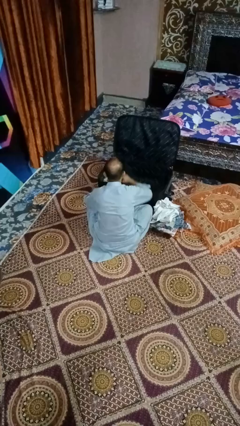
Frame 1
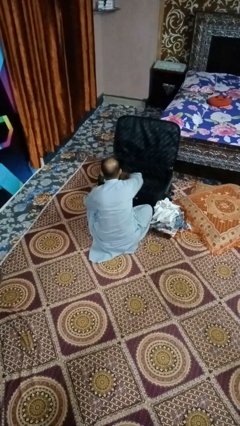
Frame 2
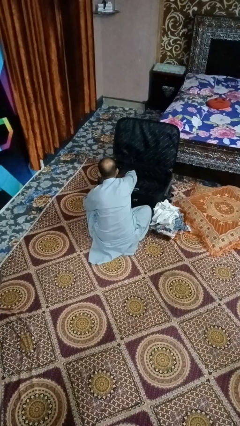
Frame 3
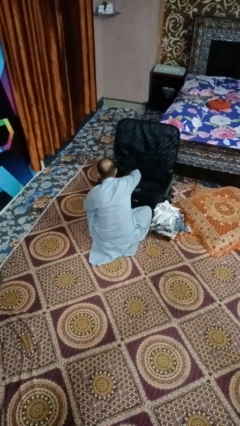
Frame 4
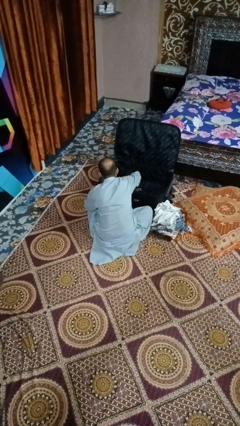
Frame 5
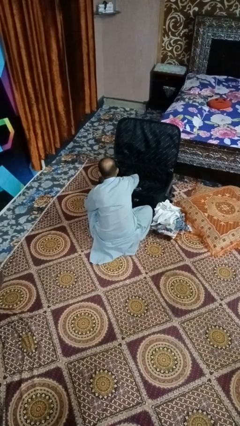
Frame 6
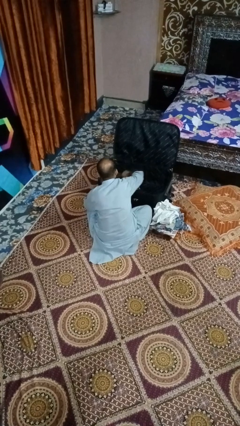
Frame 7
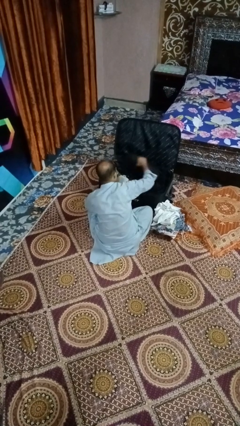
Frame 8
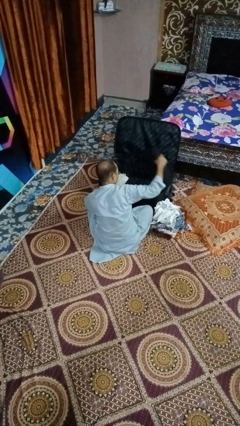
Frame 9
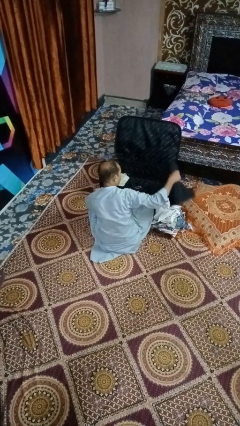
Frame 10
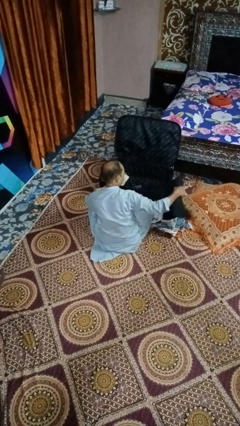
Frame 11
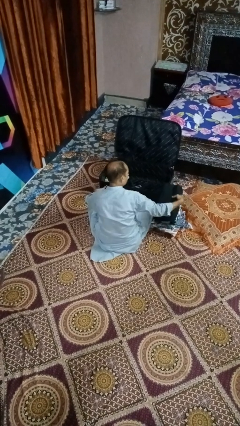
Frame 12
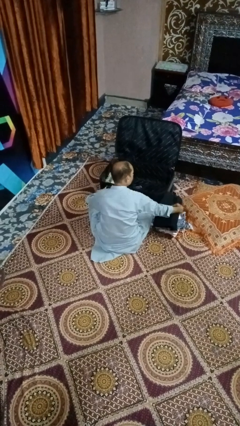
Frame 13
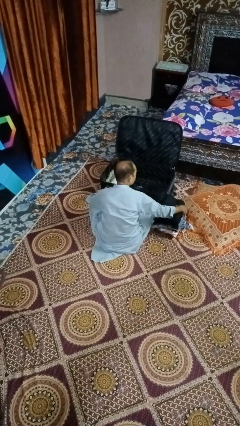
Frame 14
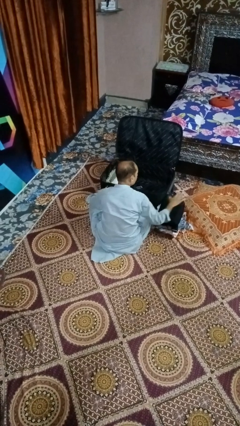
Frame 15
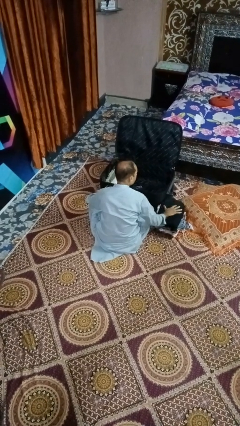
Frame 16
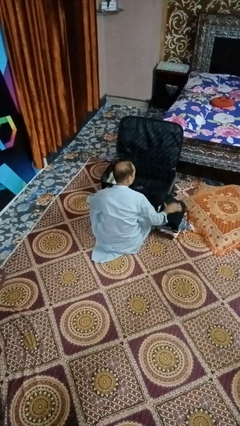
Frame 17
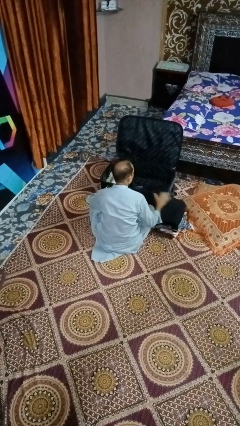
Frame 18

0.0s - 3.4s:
person unloads clothes from suitcase

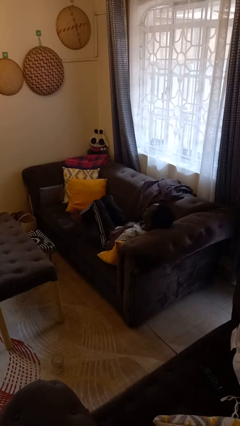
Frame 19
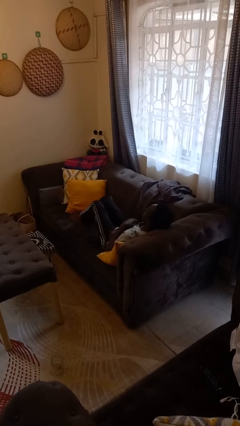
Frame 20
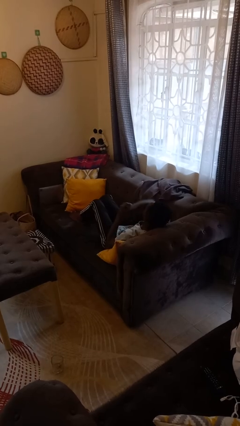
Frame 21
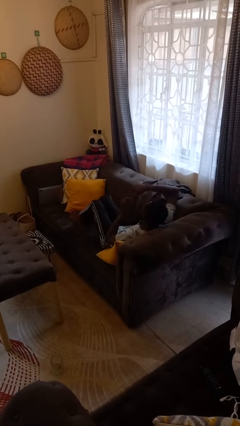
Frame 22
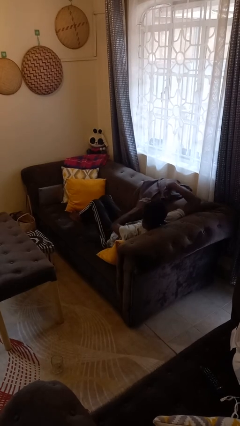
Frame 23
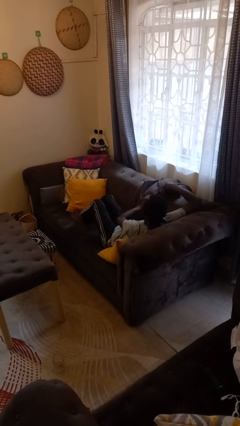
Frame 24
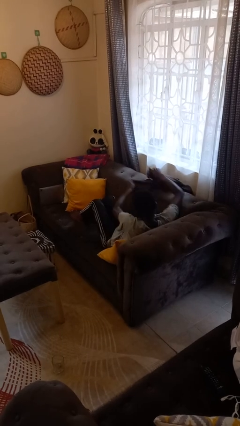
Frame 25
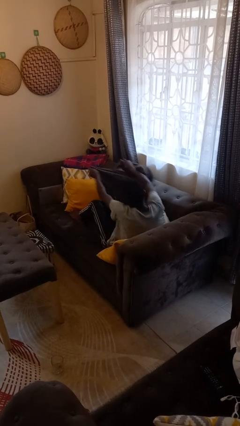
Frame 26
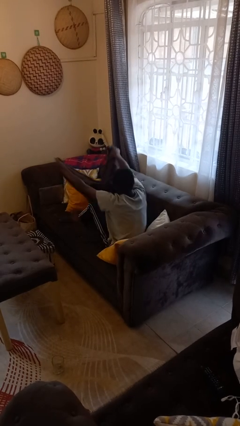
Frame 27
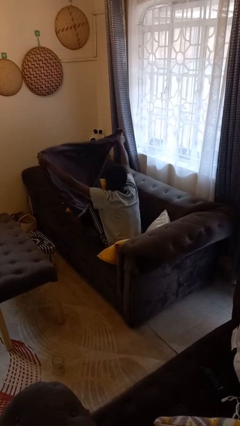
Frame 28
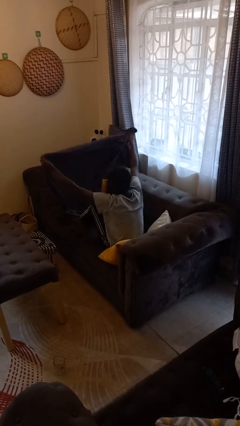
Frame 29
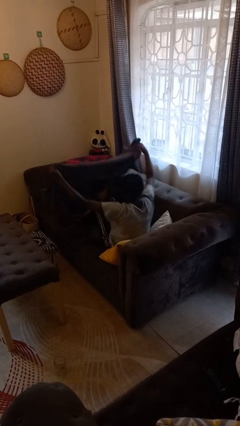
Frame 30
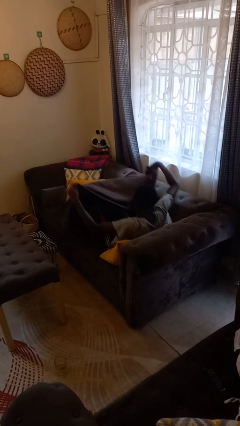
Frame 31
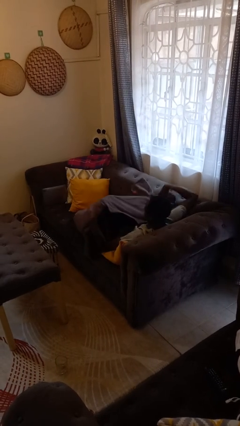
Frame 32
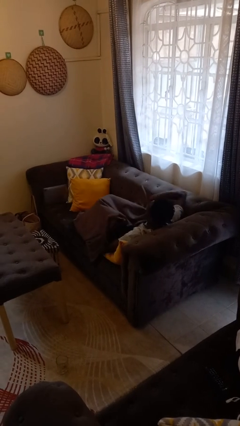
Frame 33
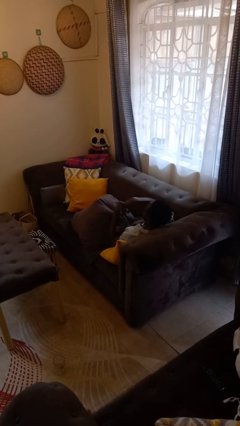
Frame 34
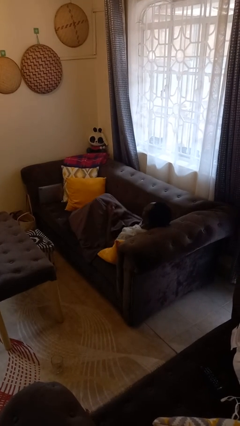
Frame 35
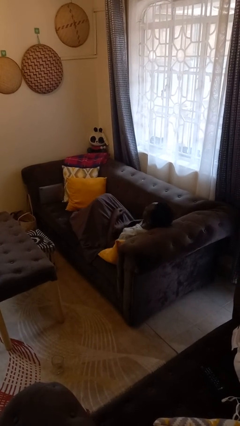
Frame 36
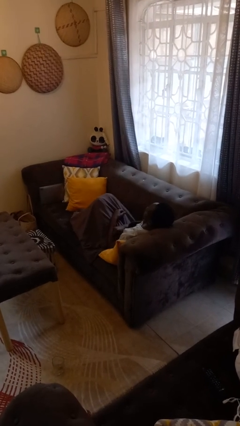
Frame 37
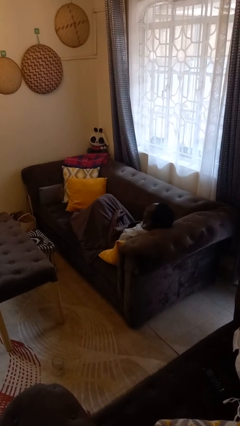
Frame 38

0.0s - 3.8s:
person covers with blanket

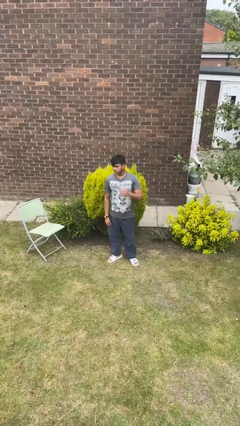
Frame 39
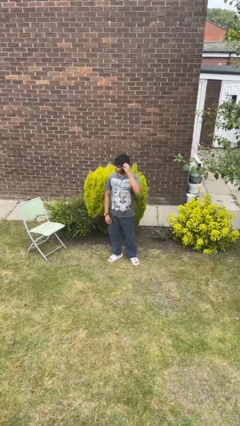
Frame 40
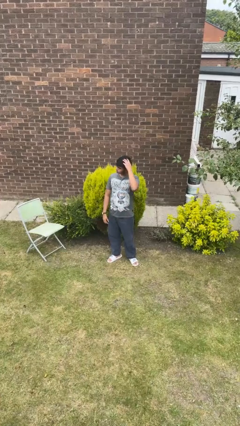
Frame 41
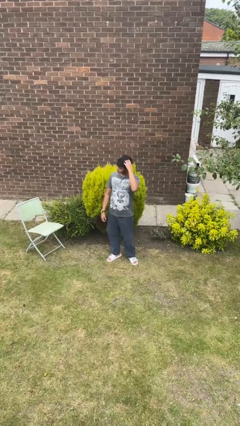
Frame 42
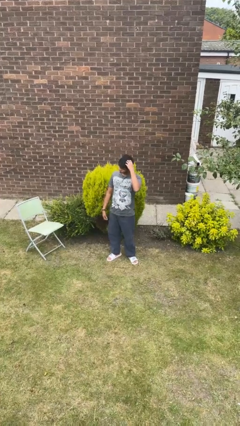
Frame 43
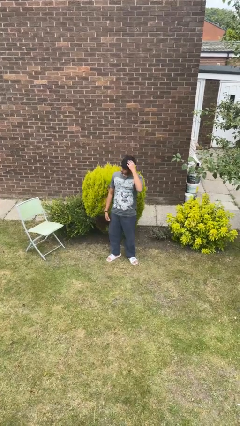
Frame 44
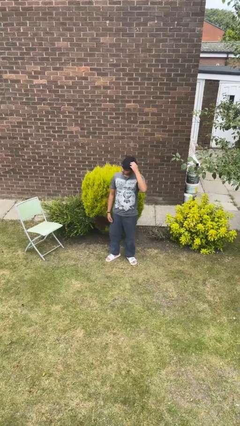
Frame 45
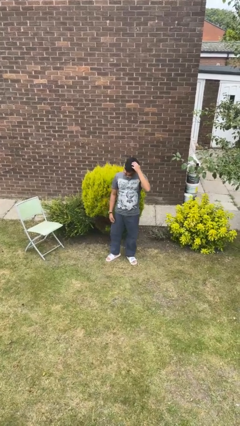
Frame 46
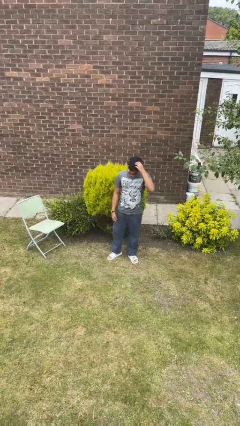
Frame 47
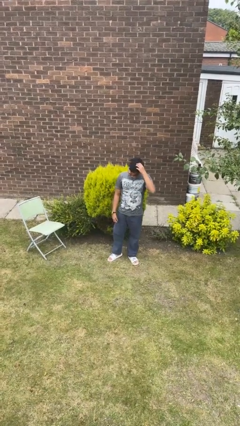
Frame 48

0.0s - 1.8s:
person scratches face

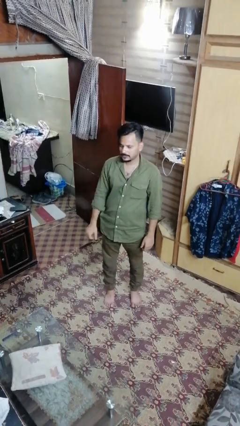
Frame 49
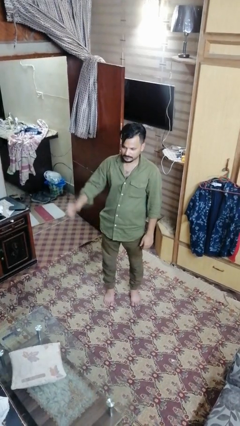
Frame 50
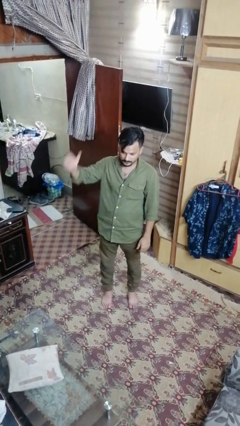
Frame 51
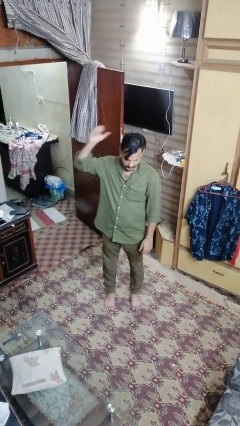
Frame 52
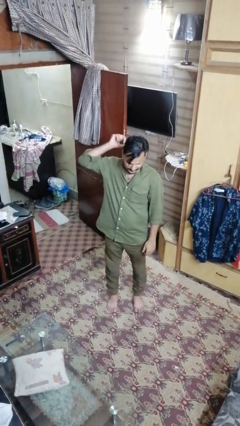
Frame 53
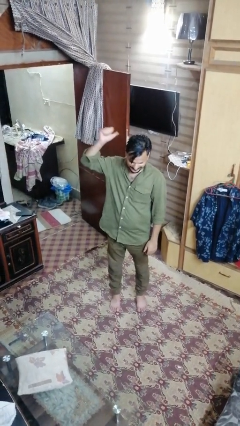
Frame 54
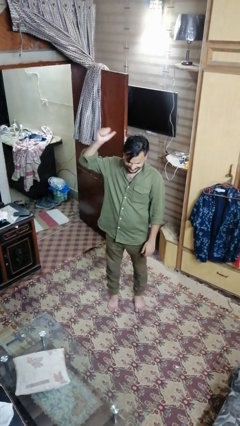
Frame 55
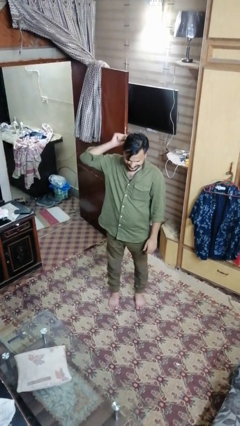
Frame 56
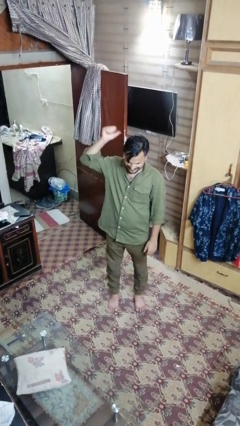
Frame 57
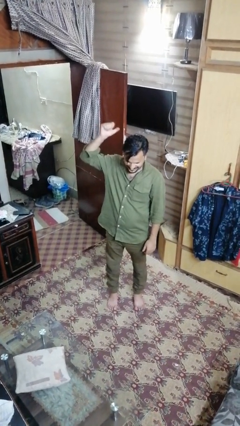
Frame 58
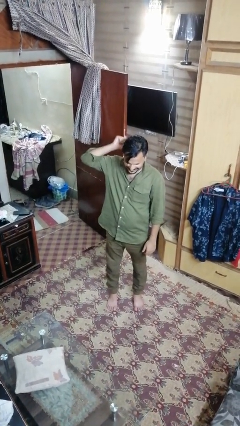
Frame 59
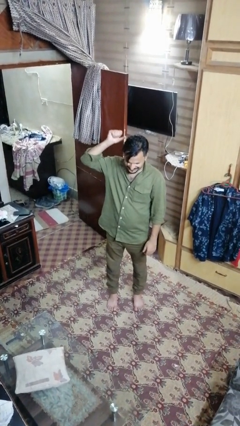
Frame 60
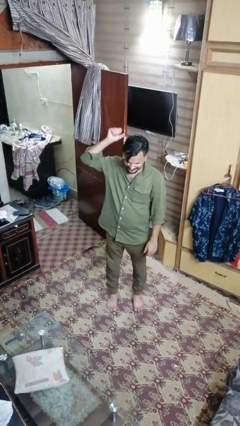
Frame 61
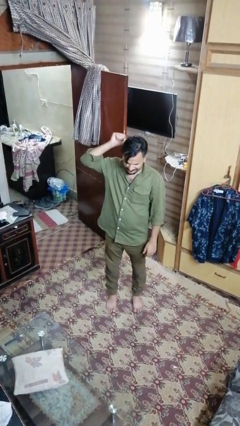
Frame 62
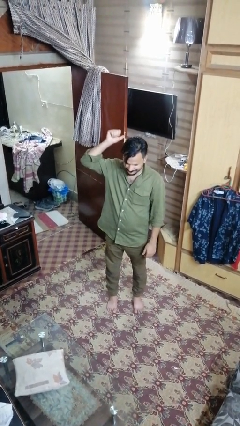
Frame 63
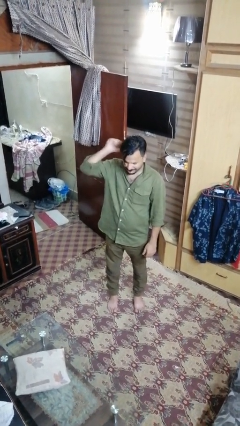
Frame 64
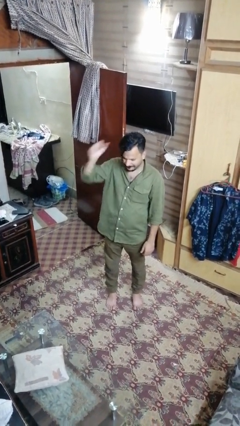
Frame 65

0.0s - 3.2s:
person gestures behind me

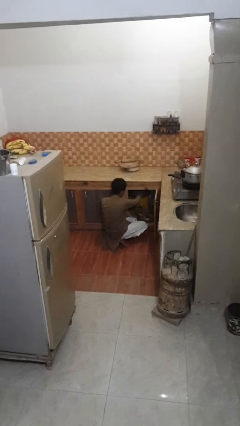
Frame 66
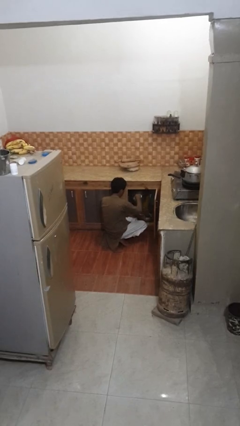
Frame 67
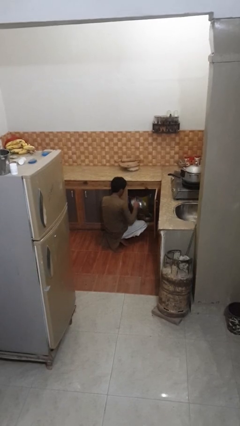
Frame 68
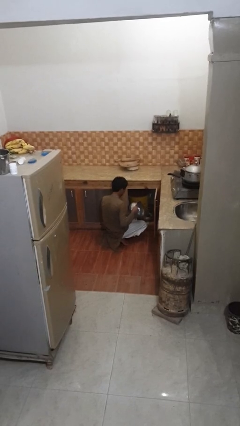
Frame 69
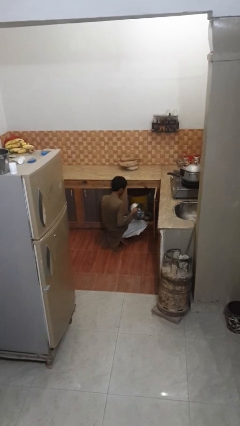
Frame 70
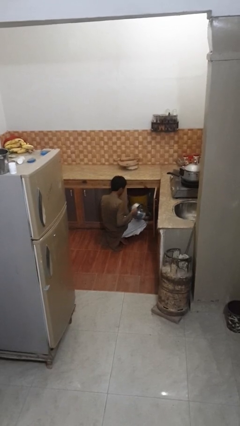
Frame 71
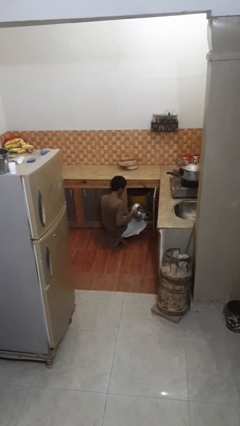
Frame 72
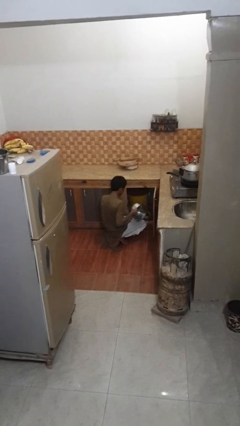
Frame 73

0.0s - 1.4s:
person takes object from kitchen drawer

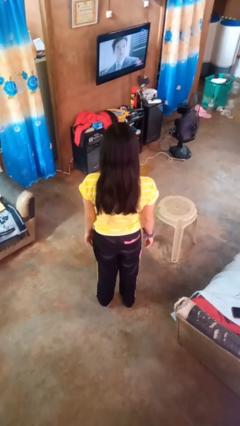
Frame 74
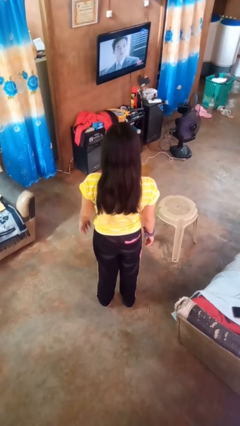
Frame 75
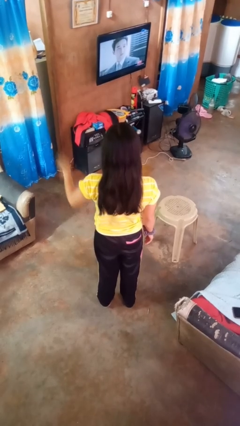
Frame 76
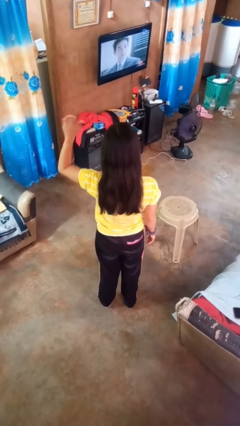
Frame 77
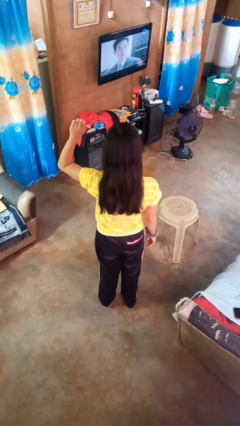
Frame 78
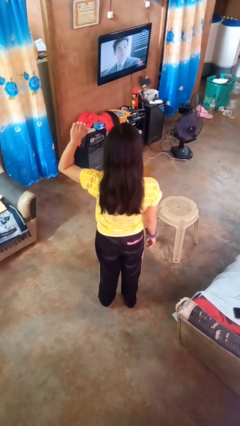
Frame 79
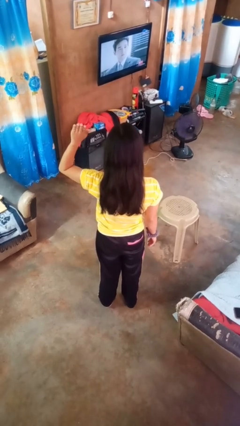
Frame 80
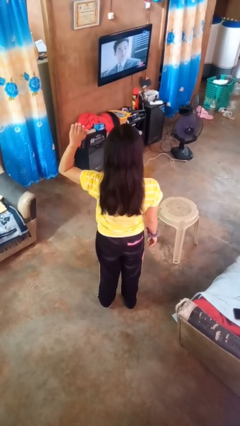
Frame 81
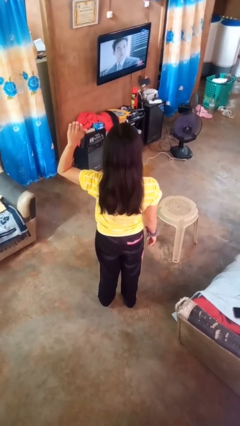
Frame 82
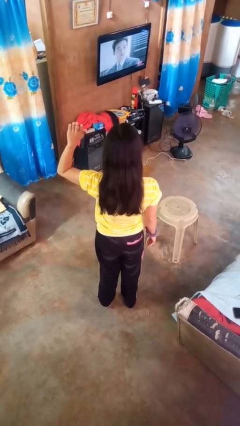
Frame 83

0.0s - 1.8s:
person gestures number five

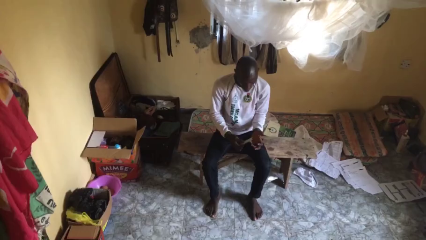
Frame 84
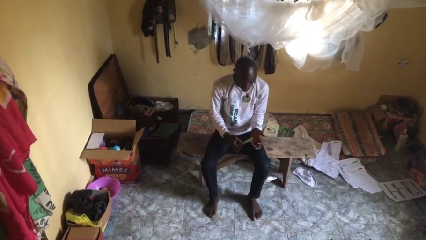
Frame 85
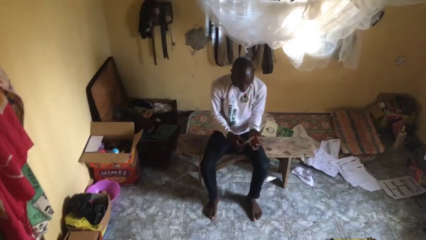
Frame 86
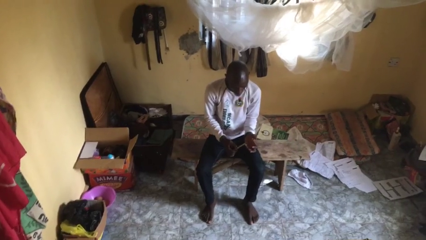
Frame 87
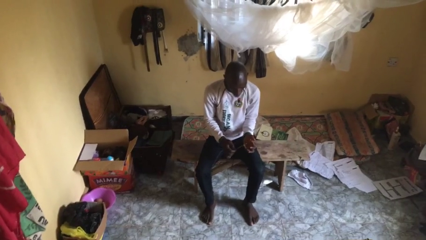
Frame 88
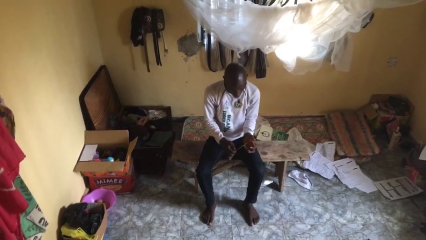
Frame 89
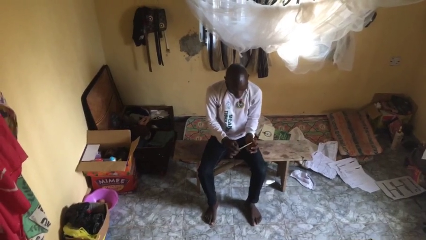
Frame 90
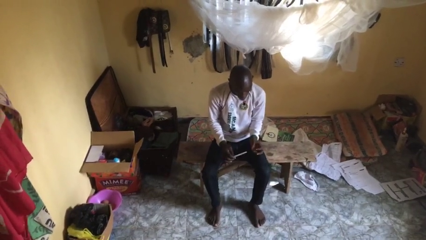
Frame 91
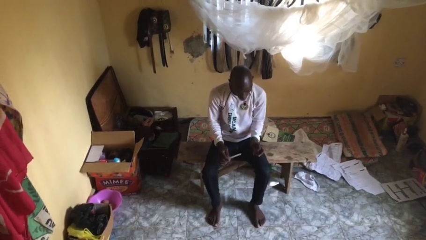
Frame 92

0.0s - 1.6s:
person files fingernails

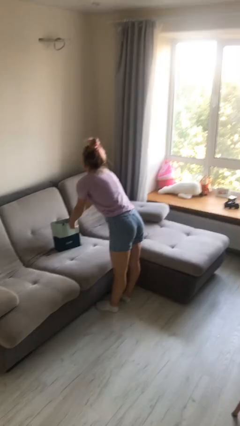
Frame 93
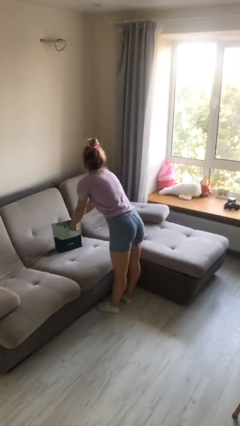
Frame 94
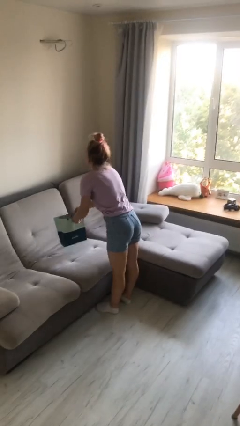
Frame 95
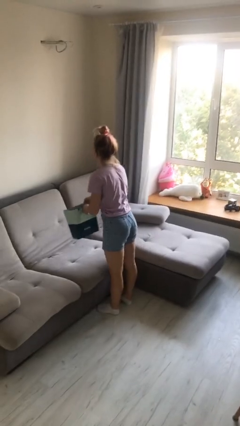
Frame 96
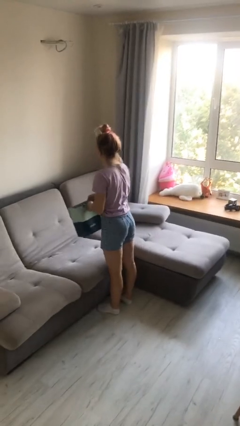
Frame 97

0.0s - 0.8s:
person picks up object from couch
